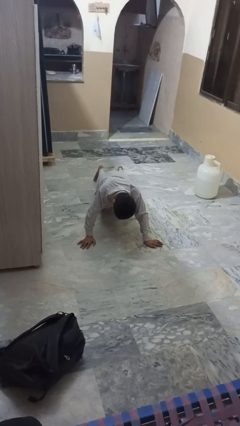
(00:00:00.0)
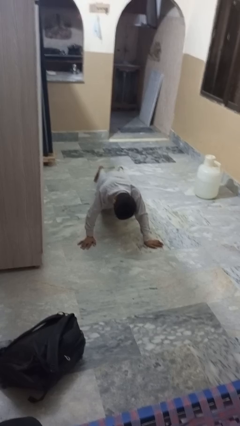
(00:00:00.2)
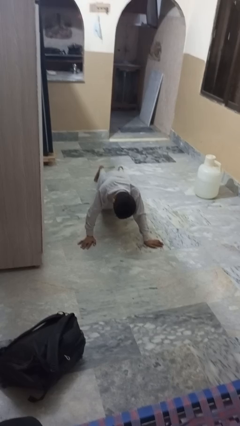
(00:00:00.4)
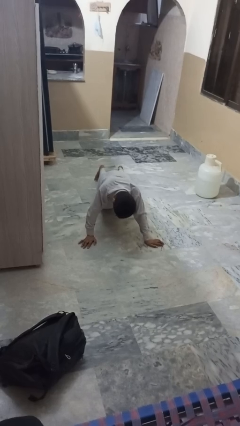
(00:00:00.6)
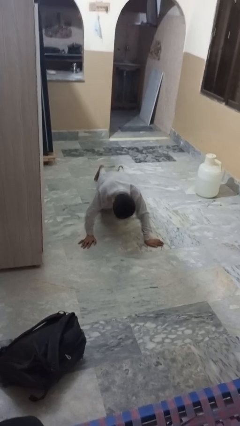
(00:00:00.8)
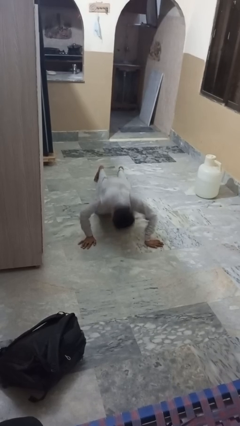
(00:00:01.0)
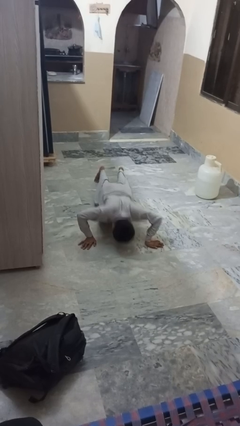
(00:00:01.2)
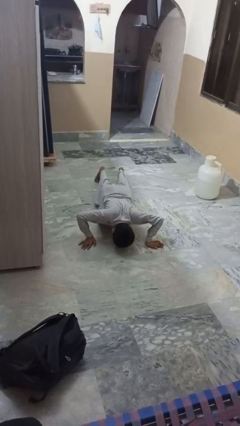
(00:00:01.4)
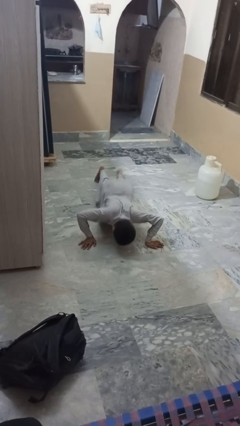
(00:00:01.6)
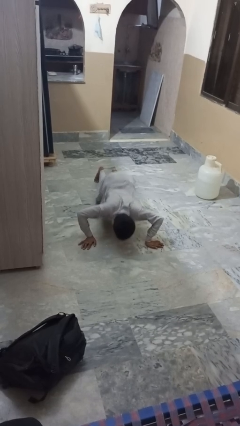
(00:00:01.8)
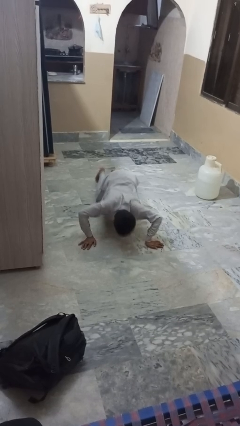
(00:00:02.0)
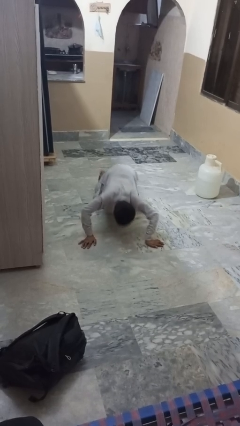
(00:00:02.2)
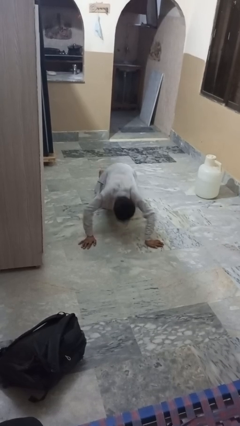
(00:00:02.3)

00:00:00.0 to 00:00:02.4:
person exercises with pushup

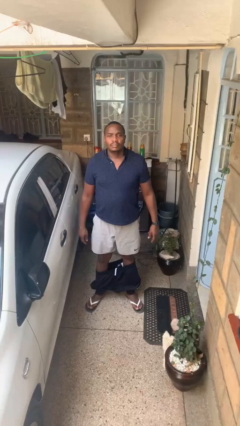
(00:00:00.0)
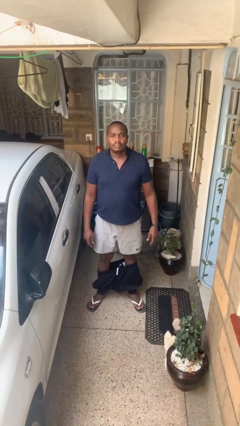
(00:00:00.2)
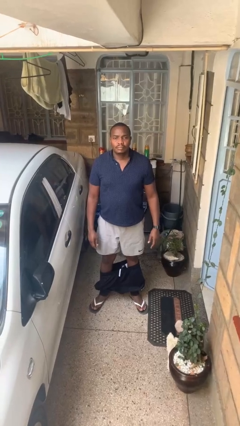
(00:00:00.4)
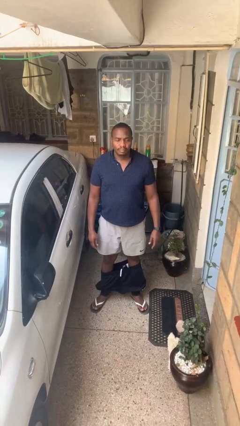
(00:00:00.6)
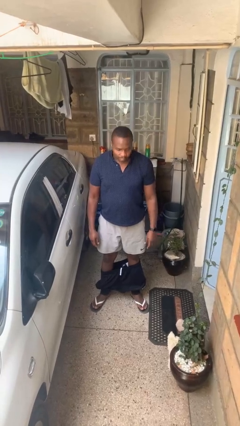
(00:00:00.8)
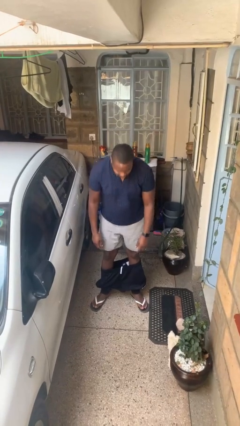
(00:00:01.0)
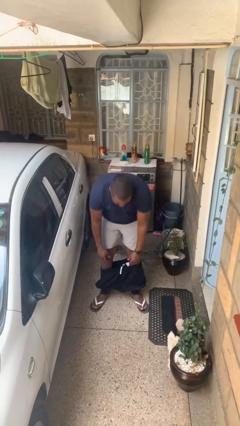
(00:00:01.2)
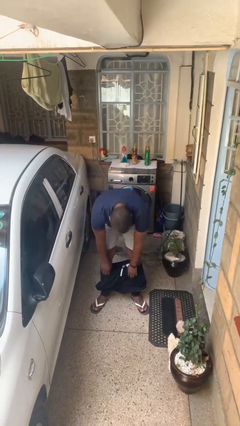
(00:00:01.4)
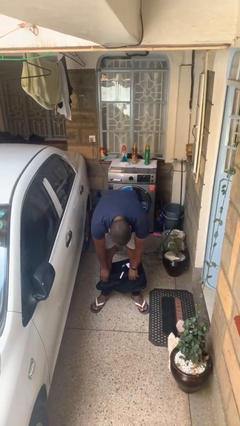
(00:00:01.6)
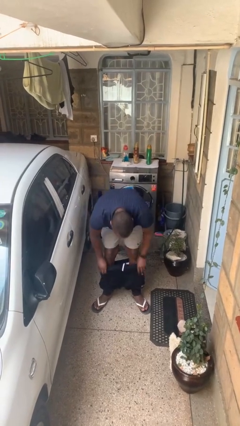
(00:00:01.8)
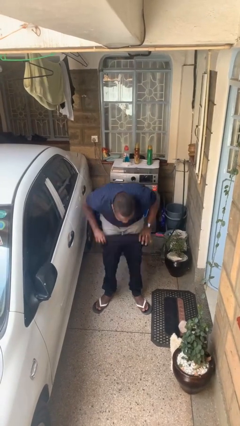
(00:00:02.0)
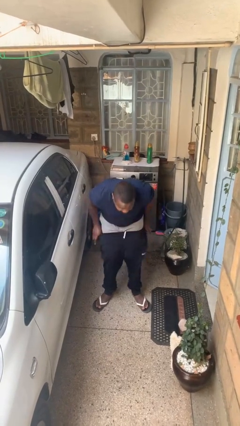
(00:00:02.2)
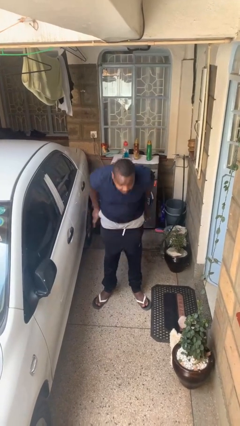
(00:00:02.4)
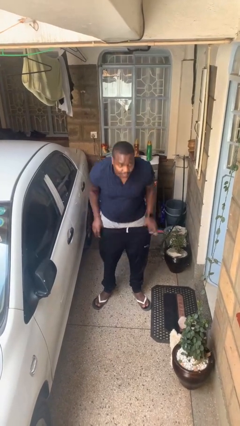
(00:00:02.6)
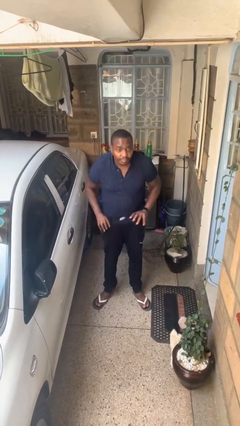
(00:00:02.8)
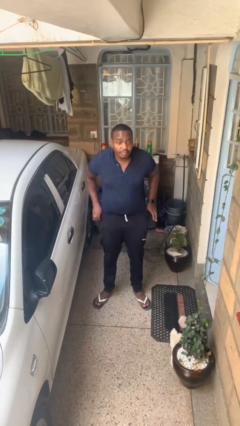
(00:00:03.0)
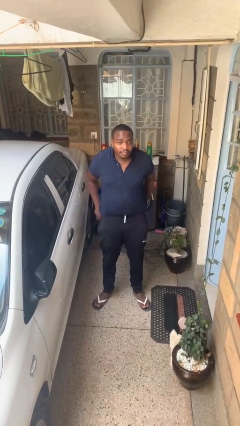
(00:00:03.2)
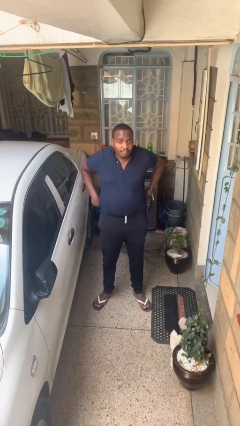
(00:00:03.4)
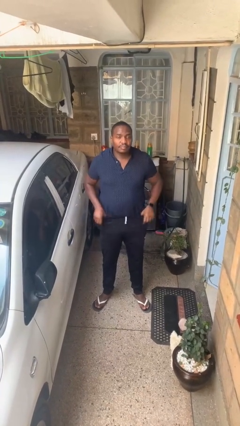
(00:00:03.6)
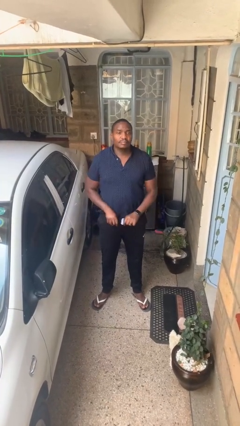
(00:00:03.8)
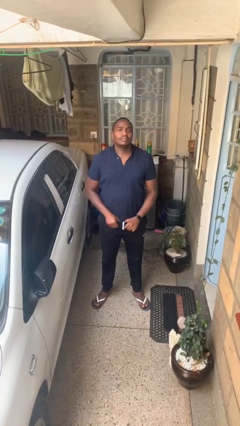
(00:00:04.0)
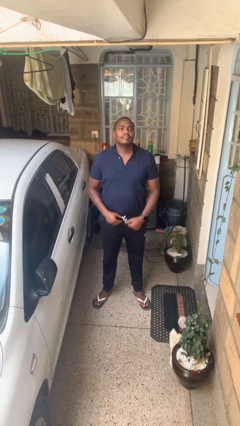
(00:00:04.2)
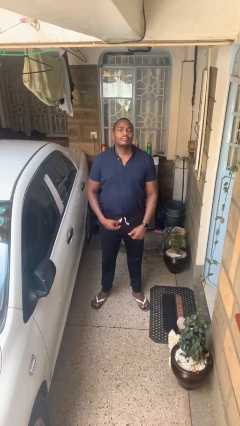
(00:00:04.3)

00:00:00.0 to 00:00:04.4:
person puts on pants

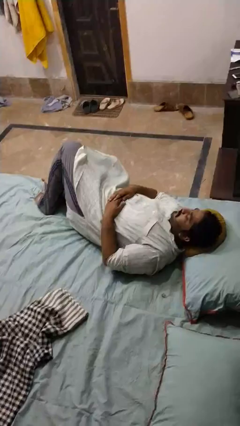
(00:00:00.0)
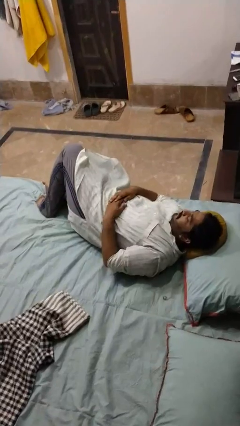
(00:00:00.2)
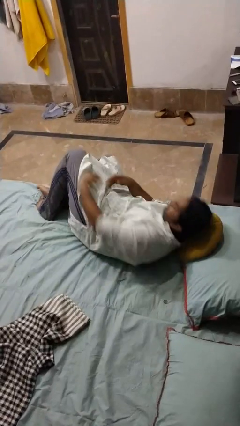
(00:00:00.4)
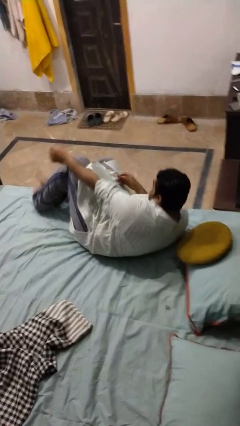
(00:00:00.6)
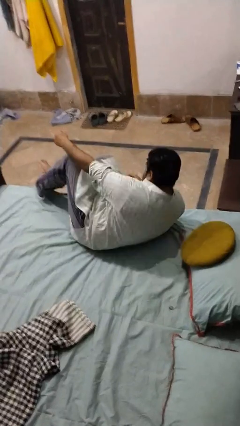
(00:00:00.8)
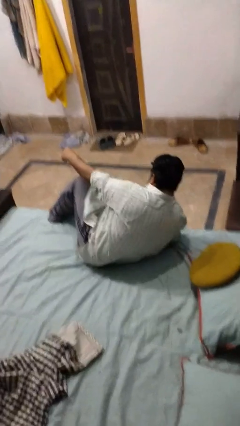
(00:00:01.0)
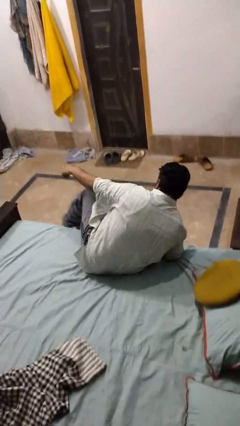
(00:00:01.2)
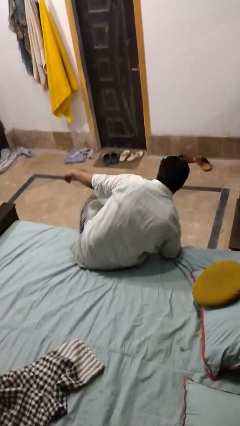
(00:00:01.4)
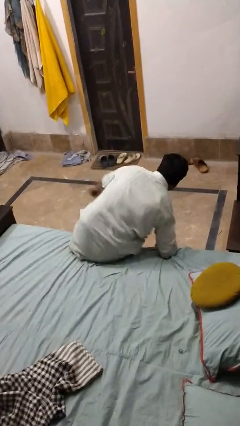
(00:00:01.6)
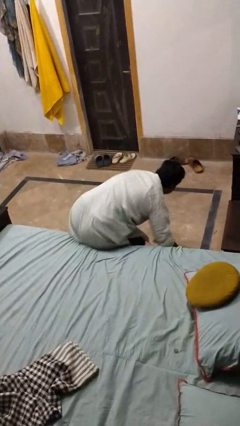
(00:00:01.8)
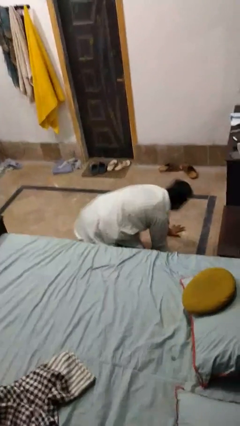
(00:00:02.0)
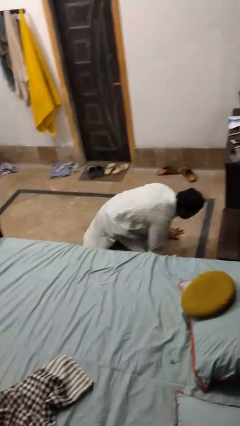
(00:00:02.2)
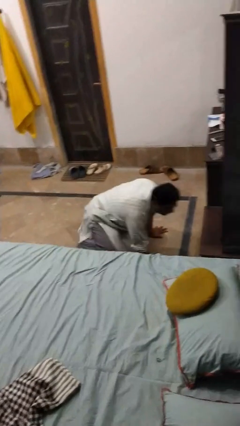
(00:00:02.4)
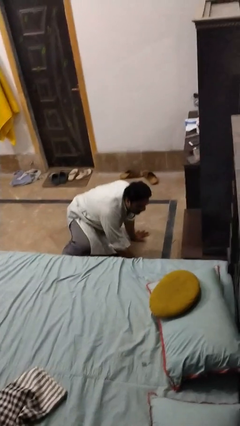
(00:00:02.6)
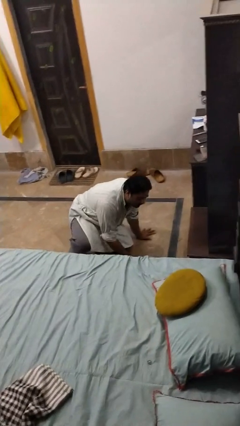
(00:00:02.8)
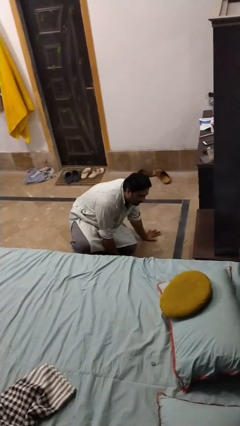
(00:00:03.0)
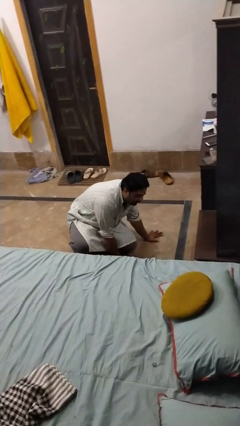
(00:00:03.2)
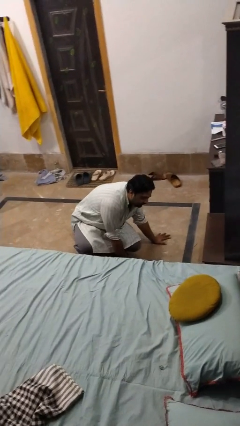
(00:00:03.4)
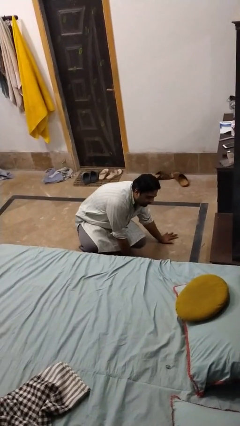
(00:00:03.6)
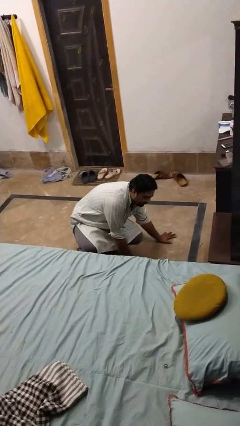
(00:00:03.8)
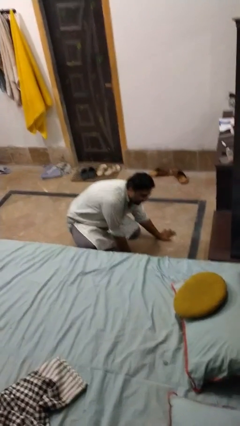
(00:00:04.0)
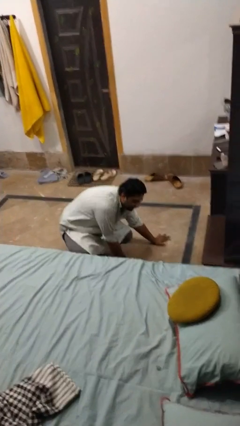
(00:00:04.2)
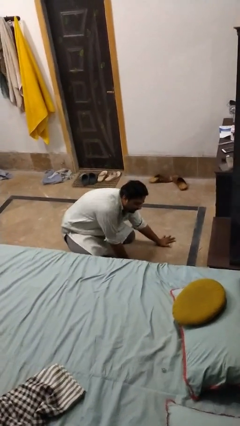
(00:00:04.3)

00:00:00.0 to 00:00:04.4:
person falls from bed

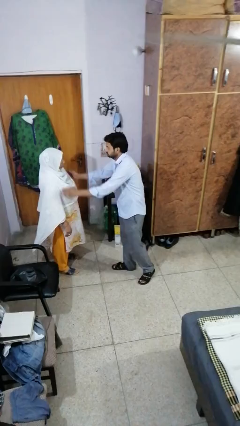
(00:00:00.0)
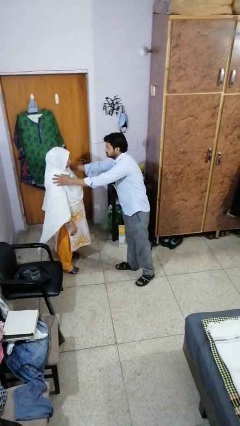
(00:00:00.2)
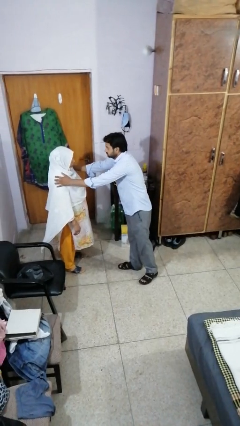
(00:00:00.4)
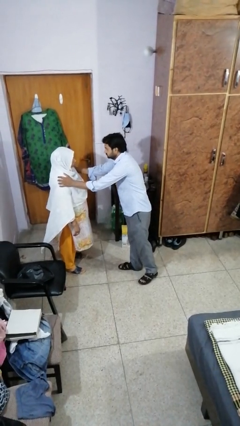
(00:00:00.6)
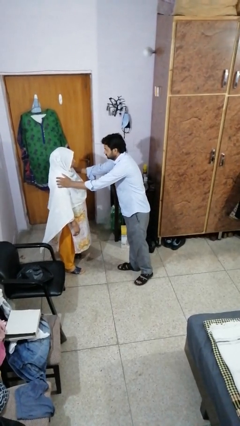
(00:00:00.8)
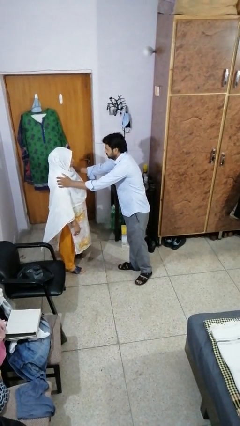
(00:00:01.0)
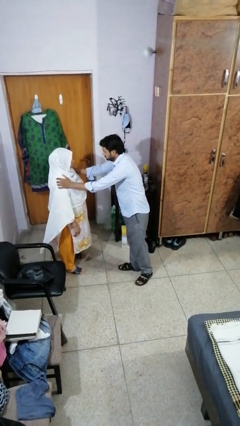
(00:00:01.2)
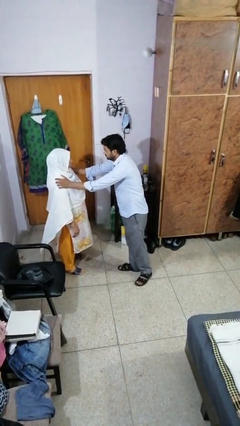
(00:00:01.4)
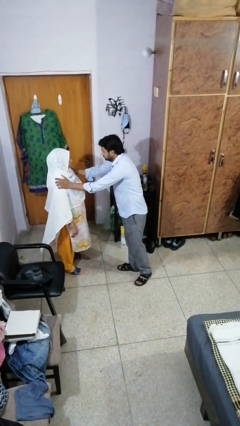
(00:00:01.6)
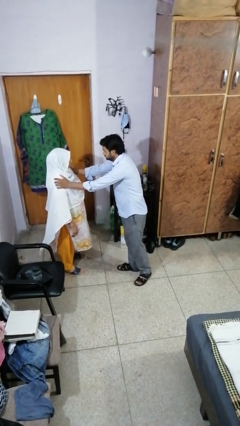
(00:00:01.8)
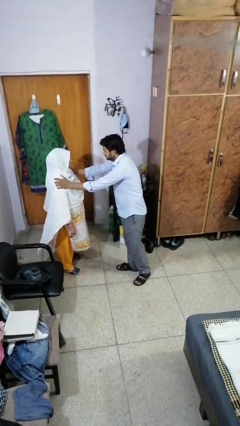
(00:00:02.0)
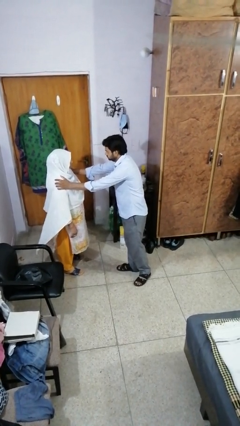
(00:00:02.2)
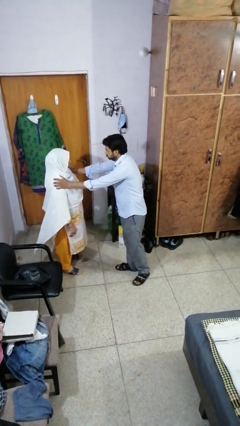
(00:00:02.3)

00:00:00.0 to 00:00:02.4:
person pounds shoulders of person

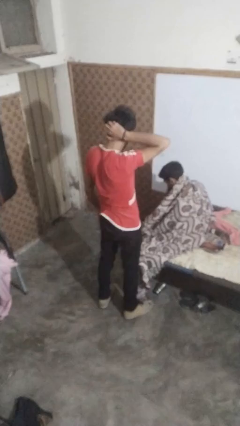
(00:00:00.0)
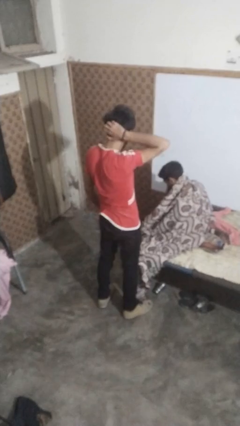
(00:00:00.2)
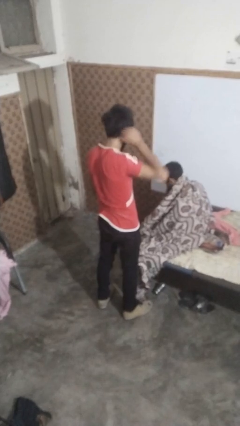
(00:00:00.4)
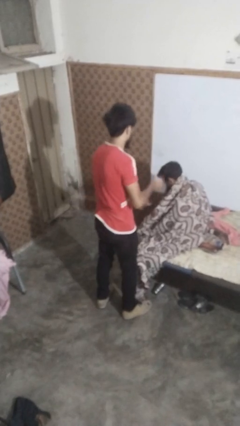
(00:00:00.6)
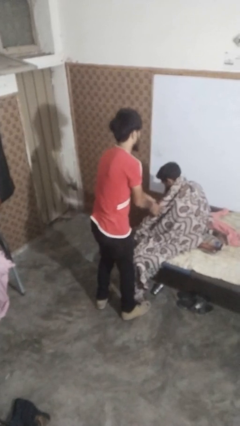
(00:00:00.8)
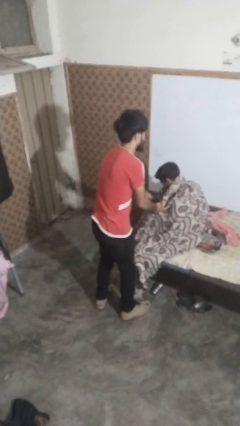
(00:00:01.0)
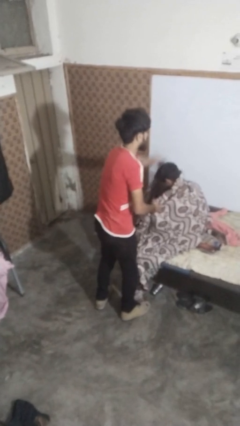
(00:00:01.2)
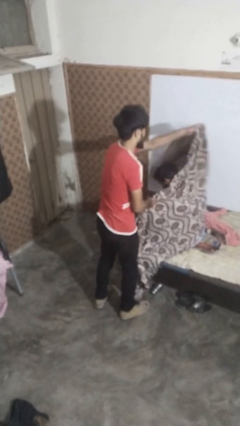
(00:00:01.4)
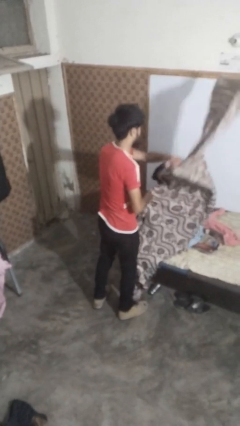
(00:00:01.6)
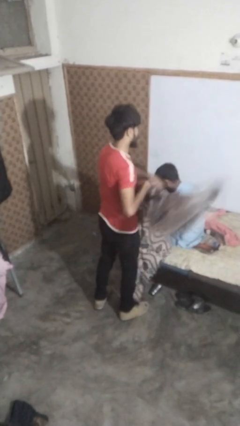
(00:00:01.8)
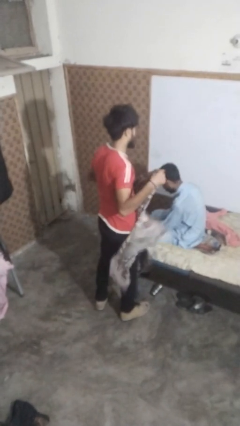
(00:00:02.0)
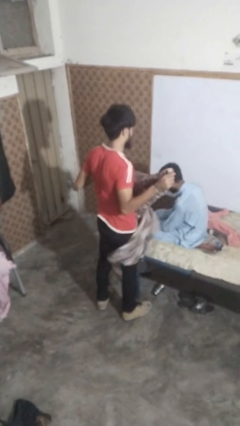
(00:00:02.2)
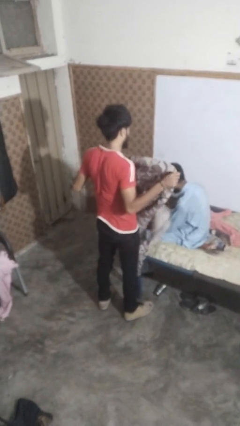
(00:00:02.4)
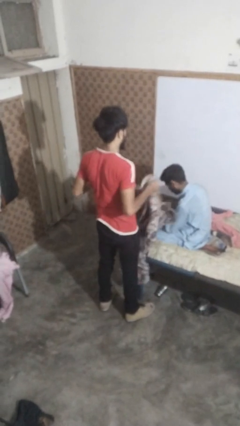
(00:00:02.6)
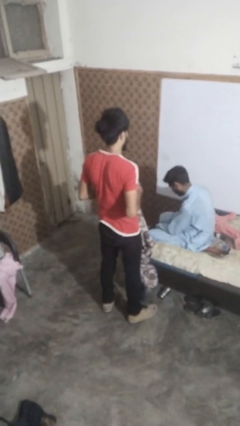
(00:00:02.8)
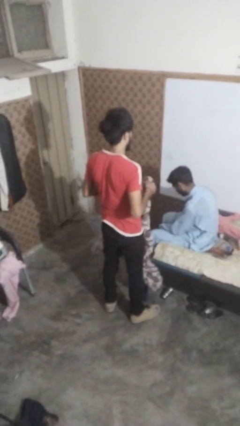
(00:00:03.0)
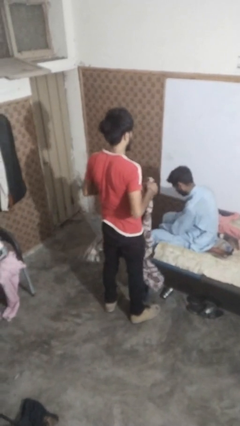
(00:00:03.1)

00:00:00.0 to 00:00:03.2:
person uncovers friend with blanket

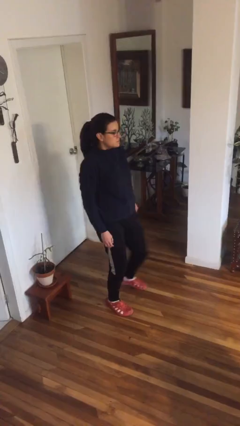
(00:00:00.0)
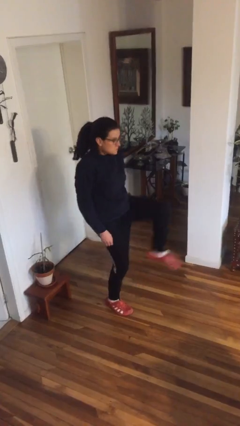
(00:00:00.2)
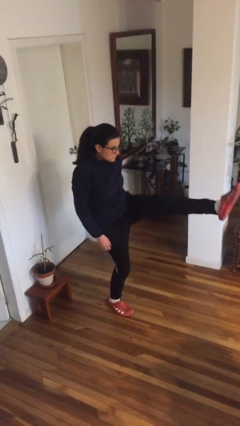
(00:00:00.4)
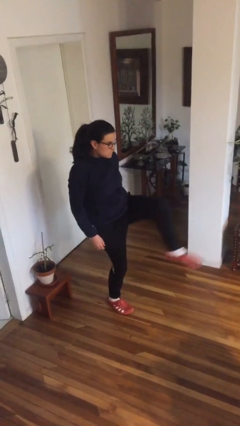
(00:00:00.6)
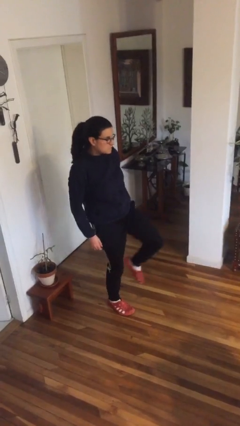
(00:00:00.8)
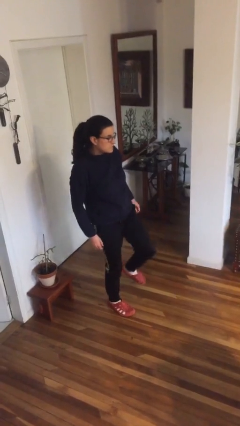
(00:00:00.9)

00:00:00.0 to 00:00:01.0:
person karate kicks
